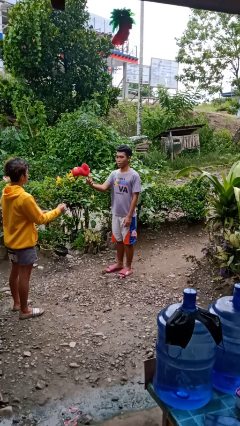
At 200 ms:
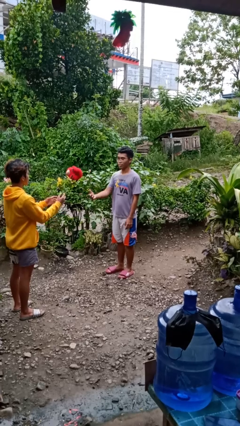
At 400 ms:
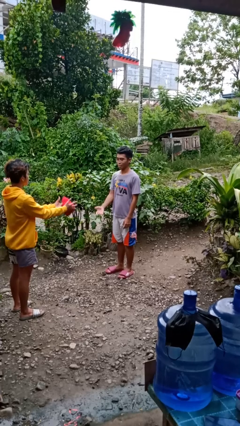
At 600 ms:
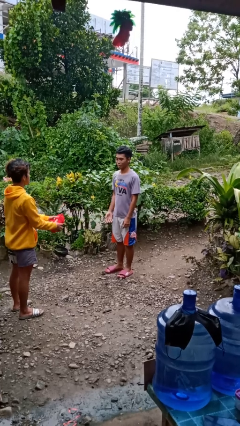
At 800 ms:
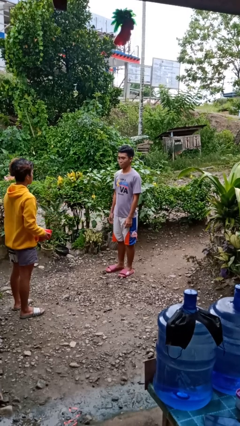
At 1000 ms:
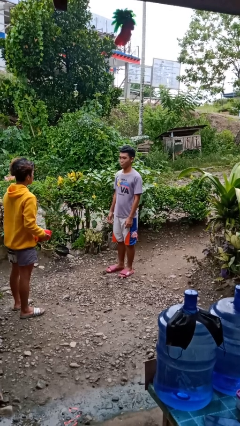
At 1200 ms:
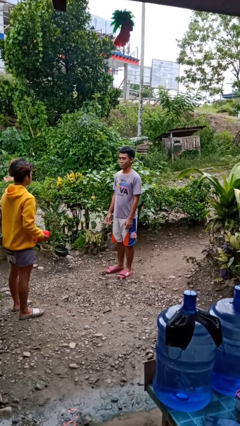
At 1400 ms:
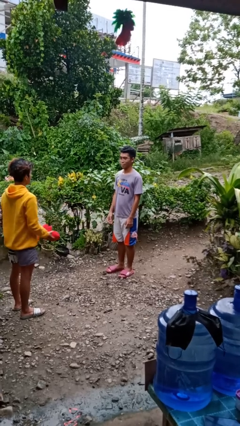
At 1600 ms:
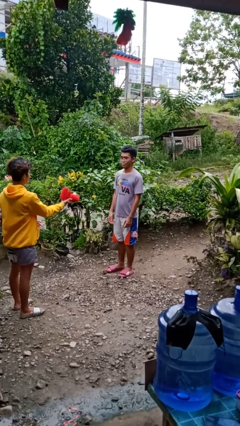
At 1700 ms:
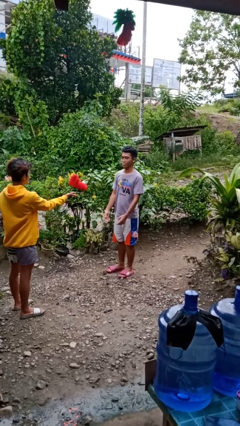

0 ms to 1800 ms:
person throws object to person

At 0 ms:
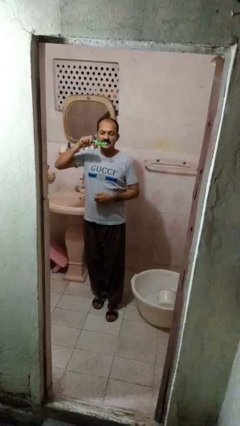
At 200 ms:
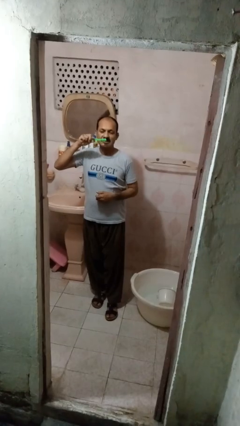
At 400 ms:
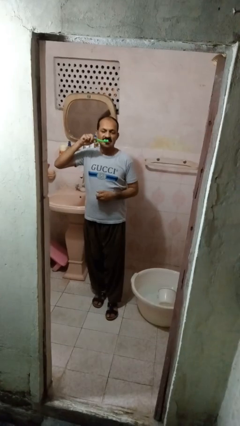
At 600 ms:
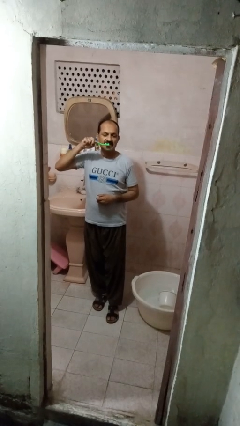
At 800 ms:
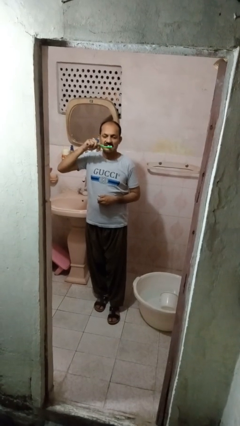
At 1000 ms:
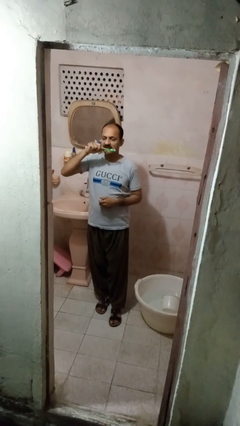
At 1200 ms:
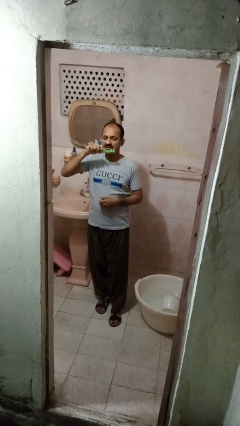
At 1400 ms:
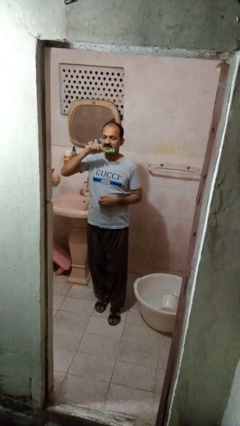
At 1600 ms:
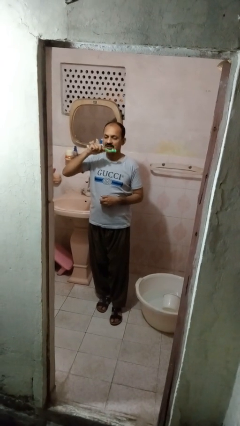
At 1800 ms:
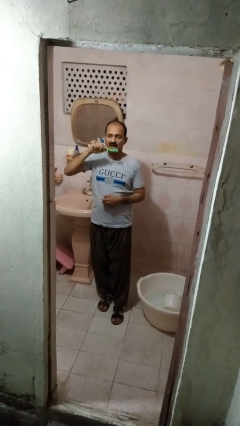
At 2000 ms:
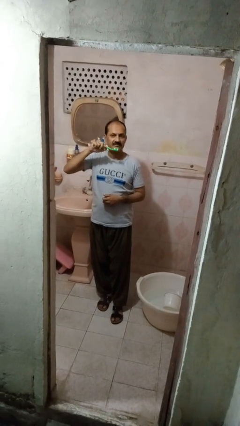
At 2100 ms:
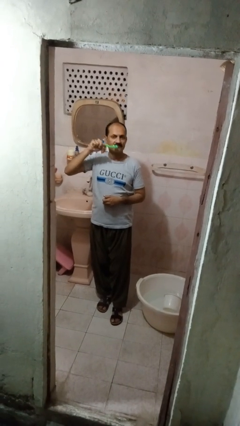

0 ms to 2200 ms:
person brushes teeth

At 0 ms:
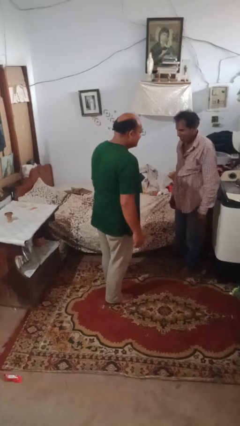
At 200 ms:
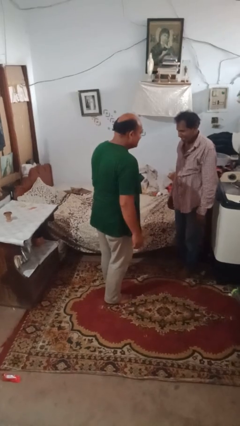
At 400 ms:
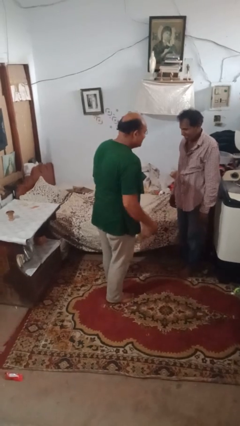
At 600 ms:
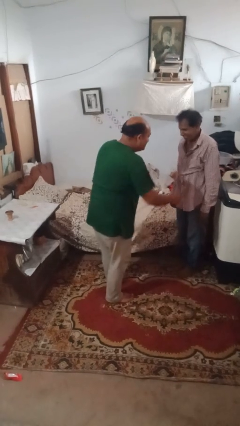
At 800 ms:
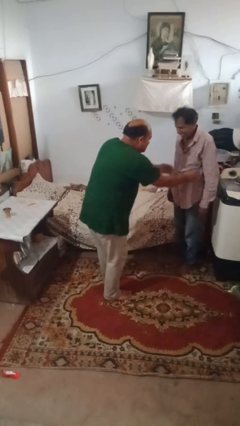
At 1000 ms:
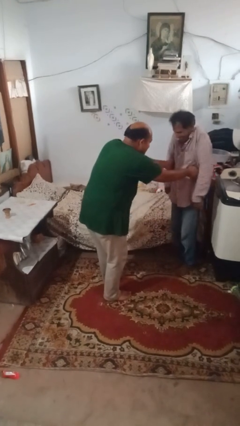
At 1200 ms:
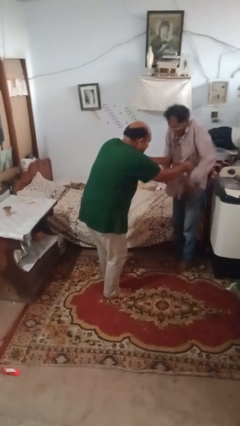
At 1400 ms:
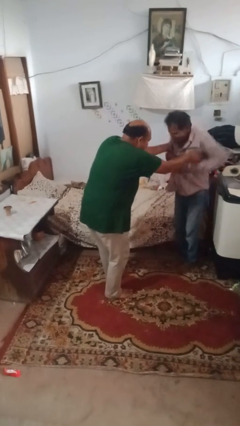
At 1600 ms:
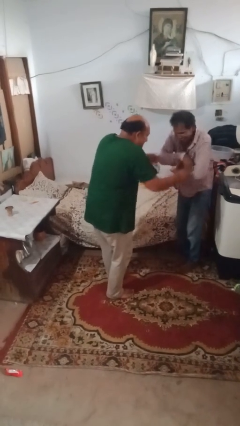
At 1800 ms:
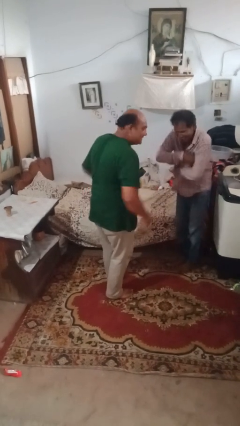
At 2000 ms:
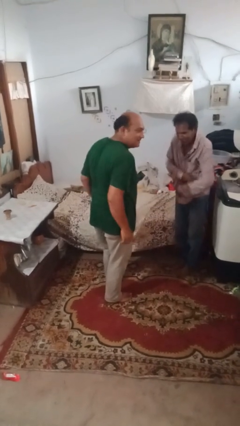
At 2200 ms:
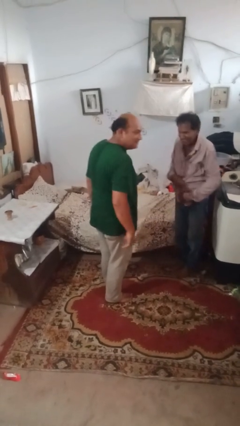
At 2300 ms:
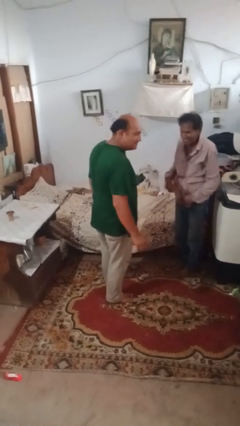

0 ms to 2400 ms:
person tickles person

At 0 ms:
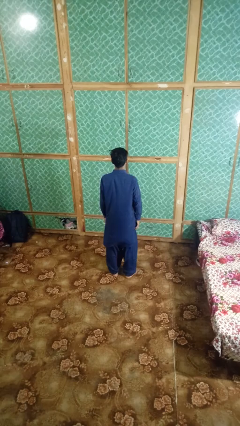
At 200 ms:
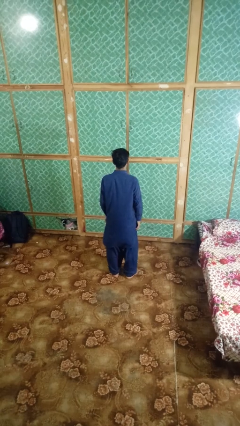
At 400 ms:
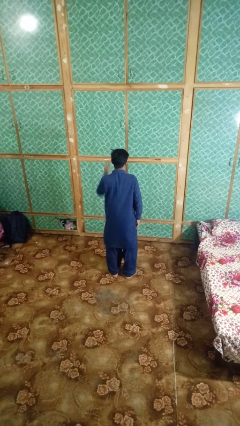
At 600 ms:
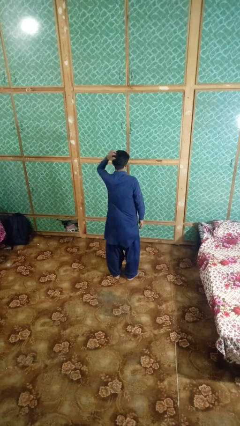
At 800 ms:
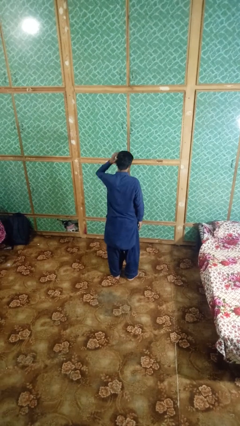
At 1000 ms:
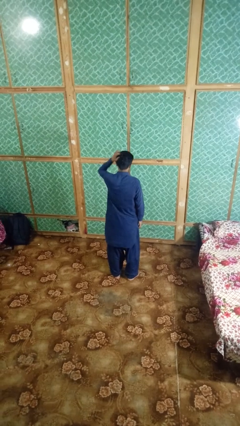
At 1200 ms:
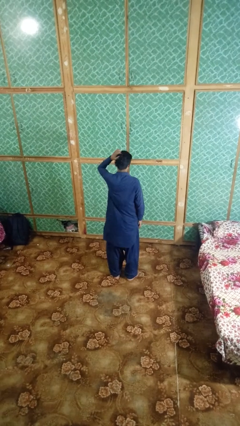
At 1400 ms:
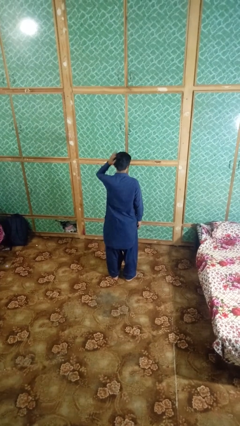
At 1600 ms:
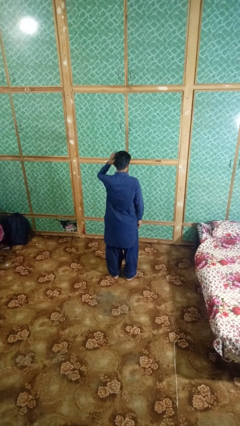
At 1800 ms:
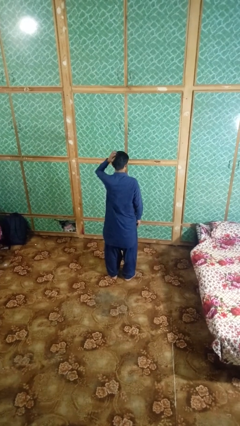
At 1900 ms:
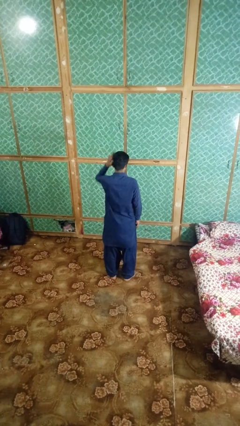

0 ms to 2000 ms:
person strokes hair

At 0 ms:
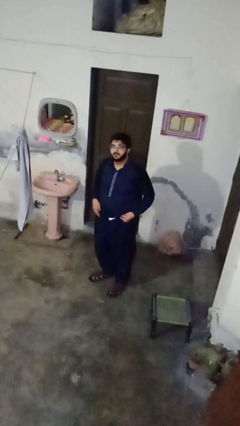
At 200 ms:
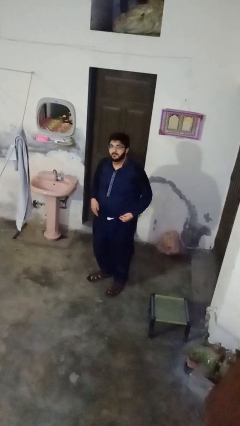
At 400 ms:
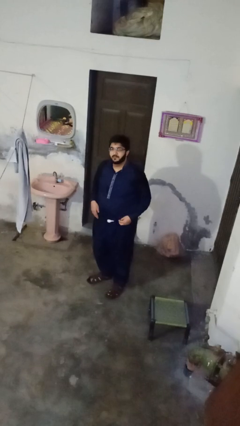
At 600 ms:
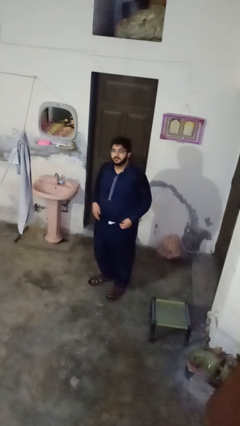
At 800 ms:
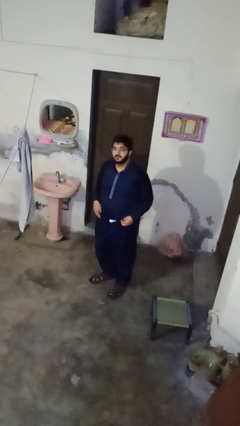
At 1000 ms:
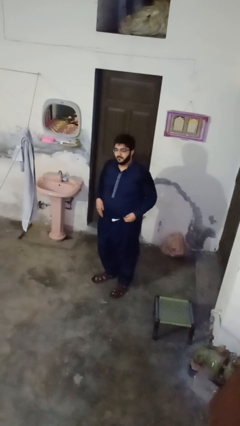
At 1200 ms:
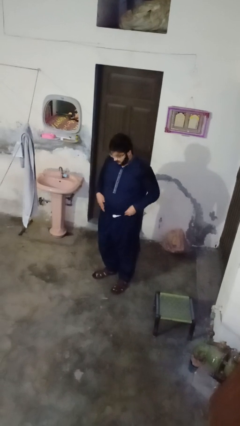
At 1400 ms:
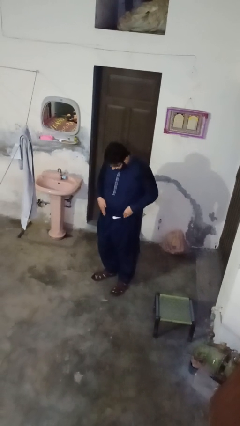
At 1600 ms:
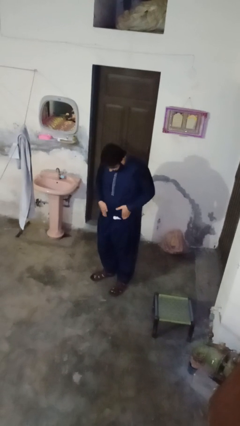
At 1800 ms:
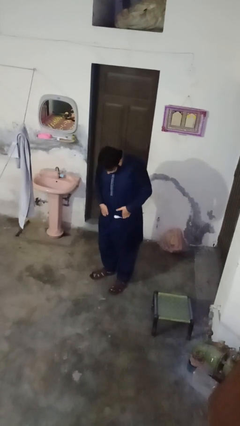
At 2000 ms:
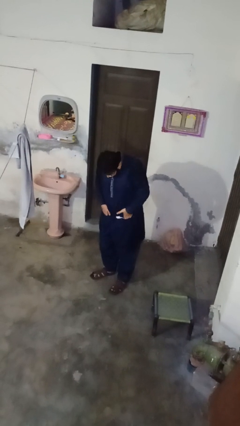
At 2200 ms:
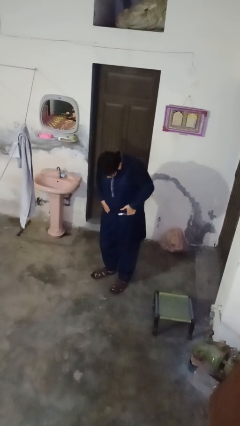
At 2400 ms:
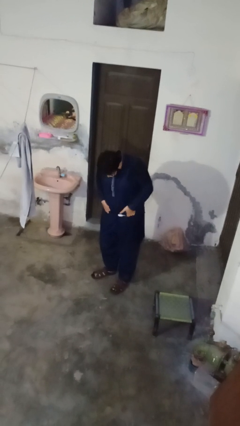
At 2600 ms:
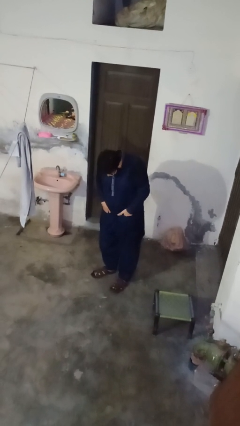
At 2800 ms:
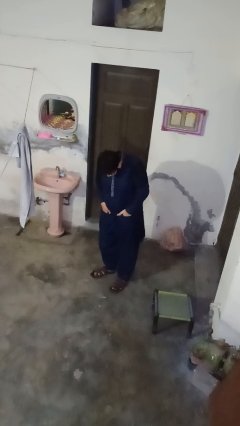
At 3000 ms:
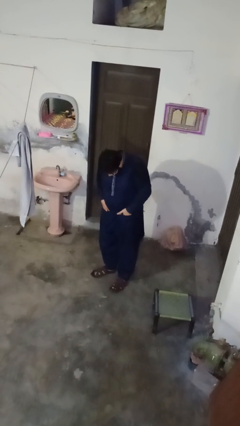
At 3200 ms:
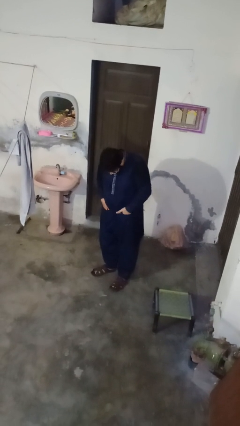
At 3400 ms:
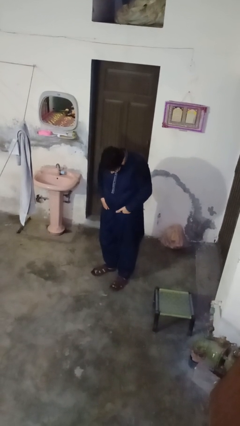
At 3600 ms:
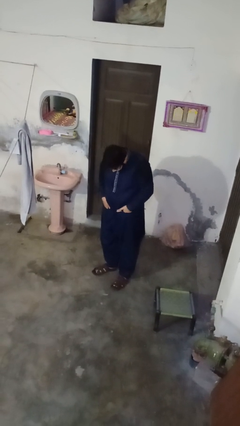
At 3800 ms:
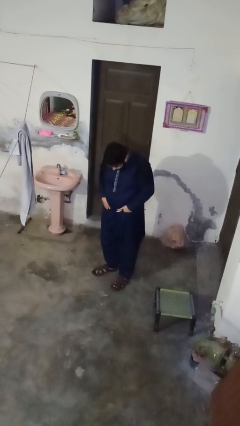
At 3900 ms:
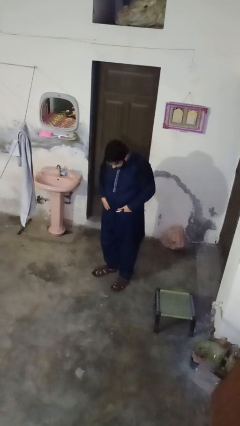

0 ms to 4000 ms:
person puts hands in back pockets

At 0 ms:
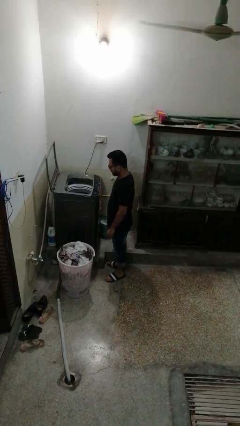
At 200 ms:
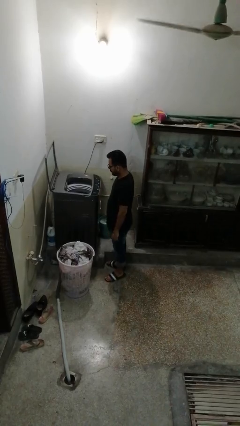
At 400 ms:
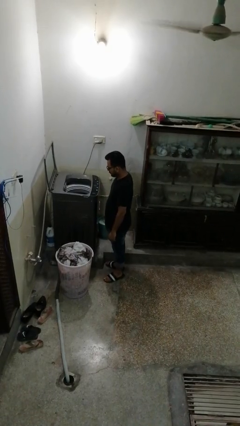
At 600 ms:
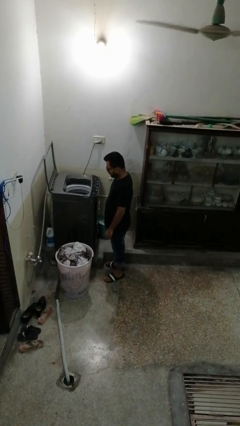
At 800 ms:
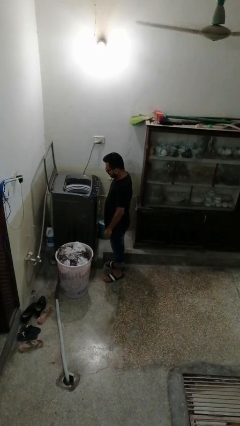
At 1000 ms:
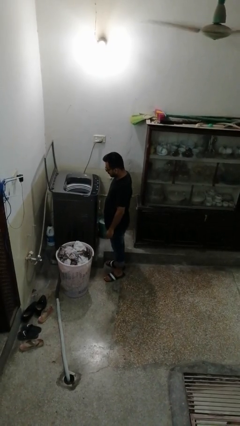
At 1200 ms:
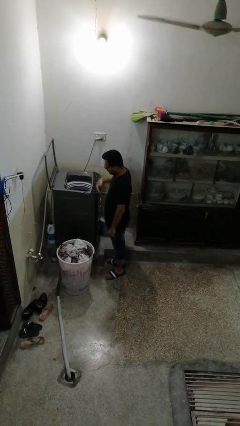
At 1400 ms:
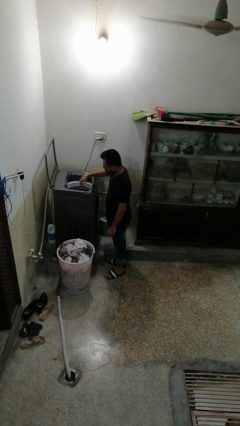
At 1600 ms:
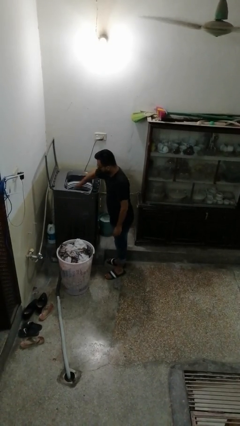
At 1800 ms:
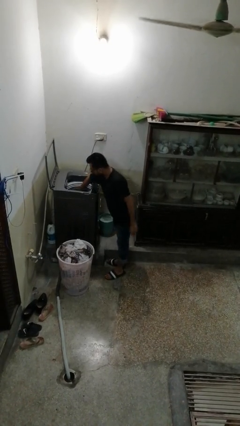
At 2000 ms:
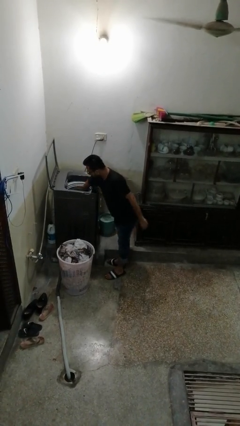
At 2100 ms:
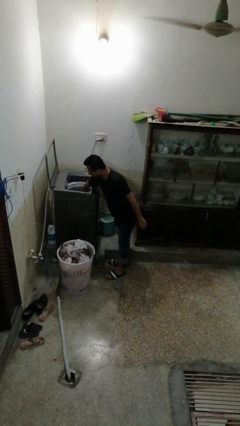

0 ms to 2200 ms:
person unloads clotheswasher

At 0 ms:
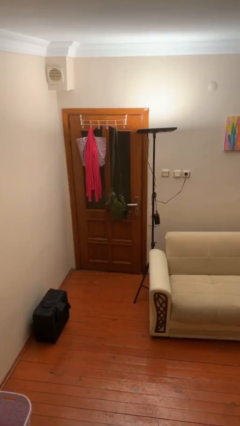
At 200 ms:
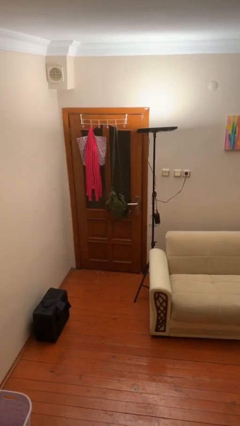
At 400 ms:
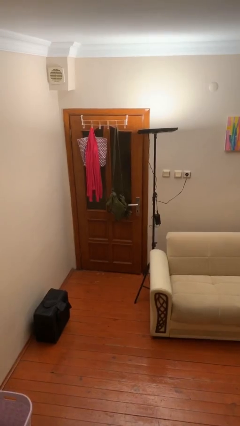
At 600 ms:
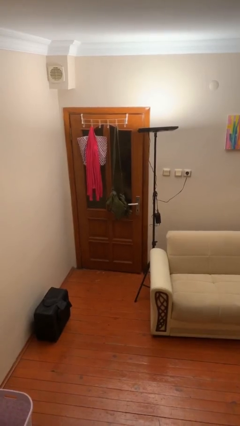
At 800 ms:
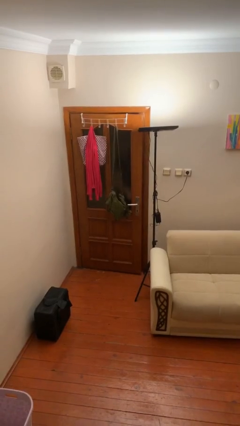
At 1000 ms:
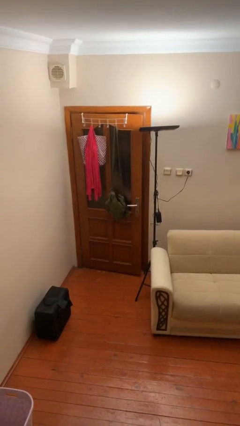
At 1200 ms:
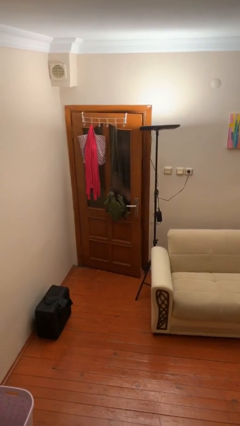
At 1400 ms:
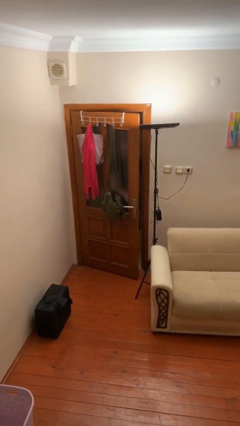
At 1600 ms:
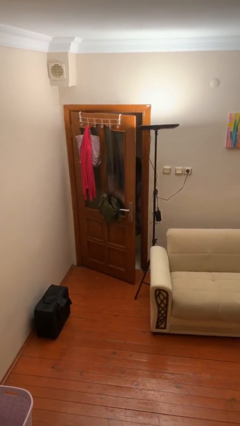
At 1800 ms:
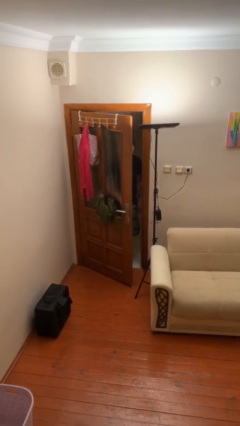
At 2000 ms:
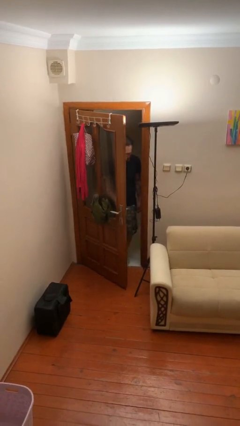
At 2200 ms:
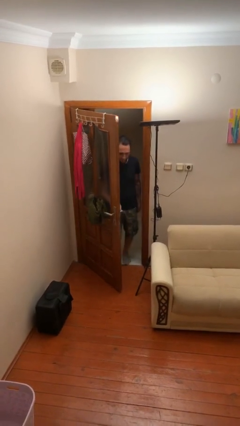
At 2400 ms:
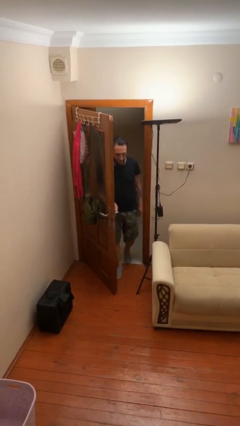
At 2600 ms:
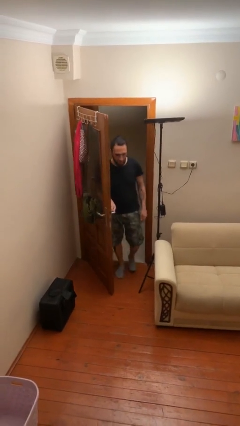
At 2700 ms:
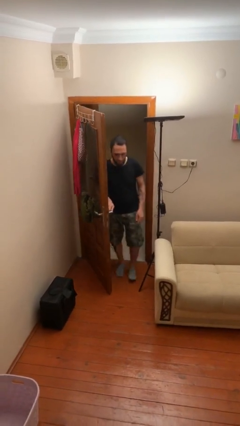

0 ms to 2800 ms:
person opens facility door
